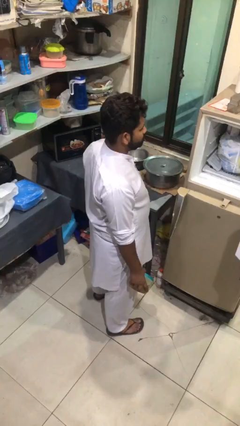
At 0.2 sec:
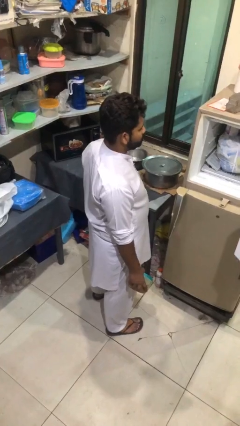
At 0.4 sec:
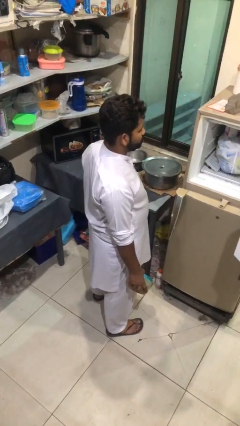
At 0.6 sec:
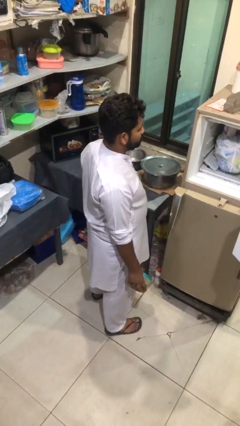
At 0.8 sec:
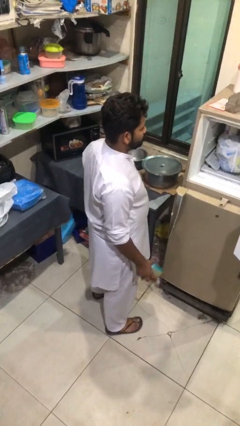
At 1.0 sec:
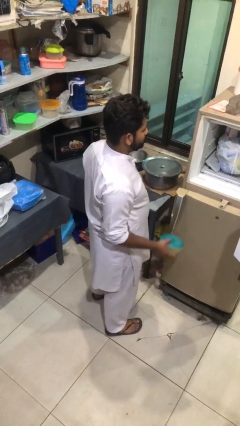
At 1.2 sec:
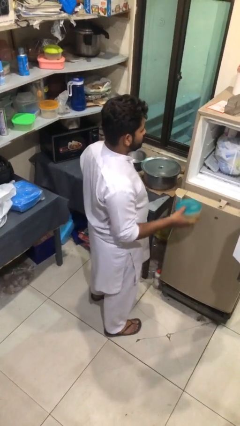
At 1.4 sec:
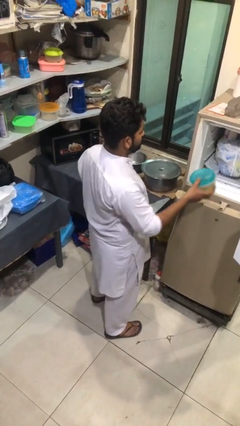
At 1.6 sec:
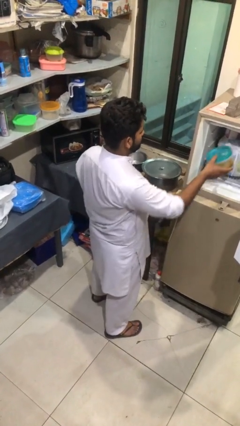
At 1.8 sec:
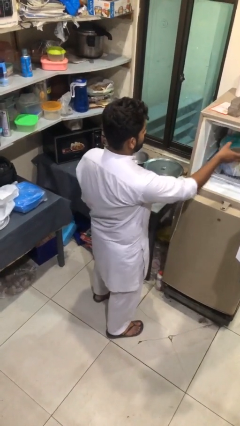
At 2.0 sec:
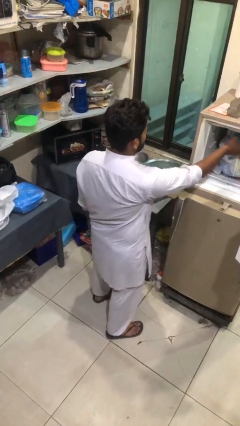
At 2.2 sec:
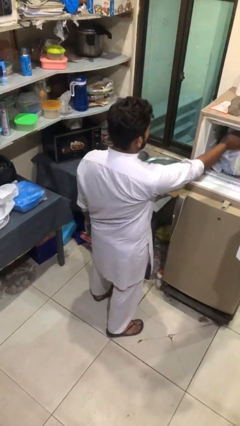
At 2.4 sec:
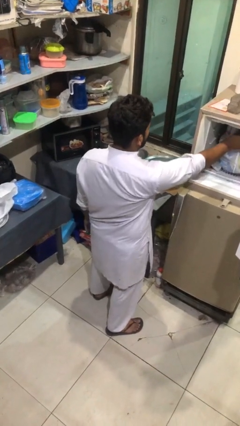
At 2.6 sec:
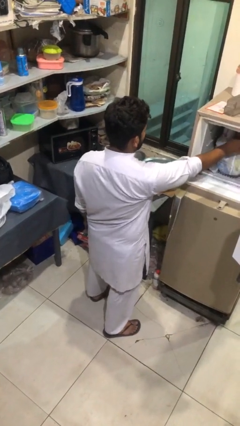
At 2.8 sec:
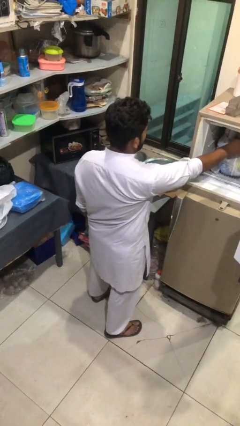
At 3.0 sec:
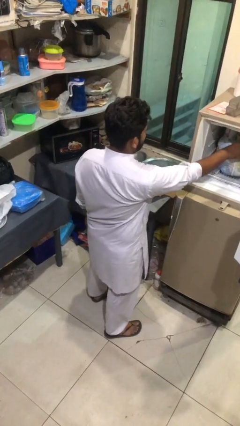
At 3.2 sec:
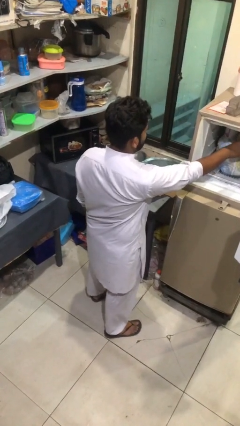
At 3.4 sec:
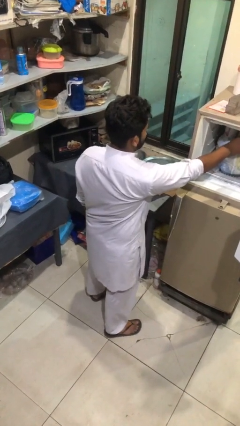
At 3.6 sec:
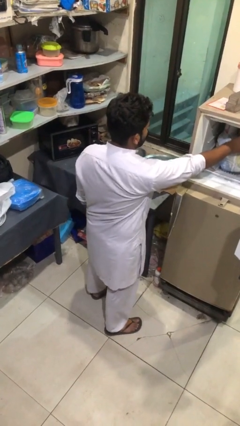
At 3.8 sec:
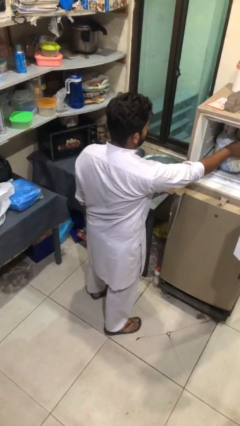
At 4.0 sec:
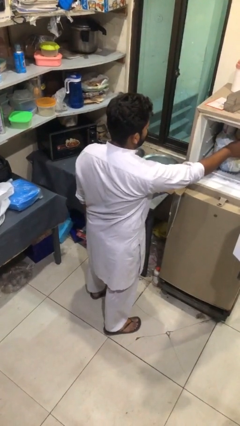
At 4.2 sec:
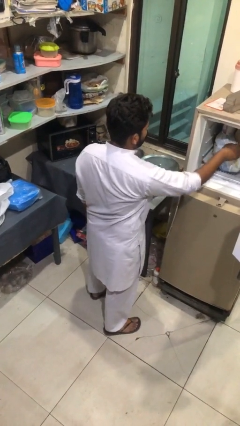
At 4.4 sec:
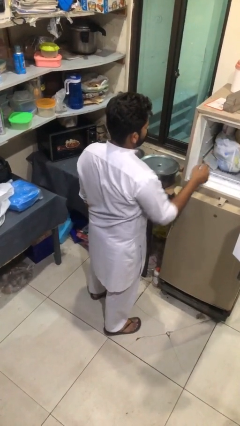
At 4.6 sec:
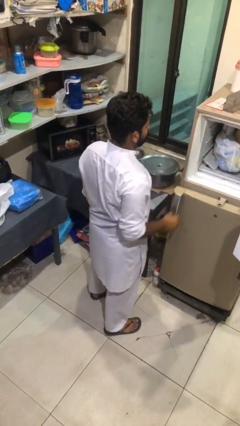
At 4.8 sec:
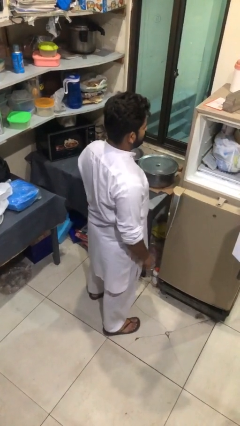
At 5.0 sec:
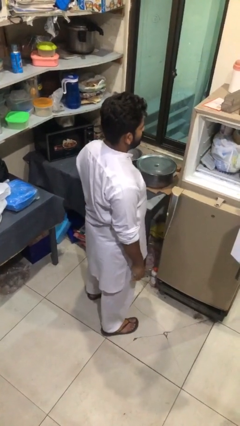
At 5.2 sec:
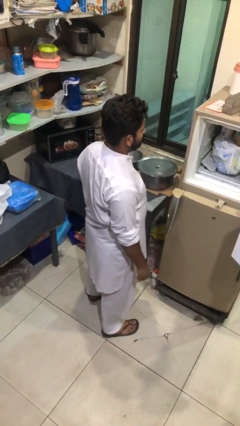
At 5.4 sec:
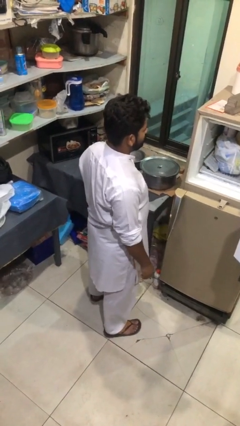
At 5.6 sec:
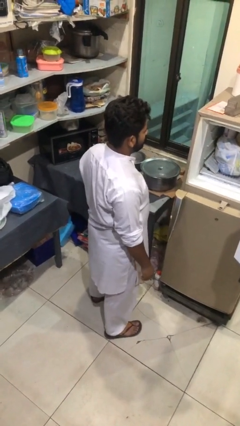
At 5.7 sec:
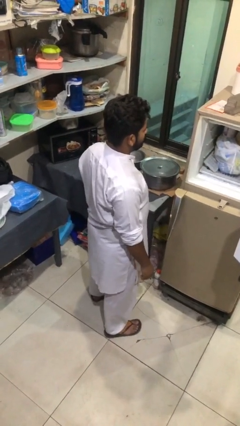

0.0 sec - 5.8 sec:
person puts object into refrigerator

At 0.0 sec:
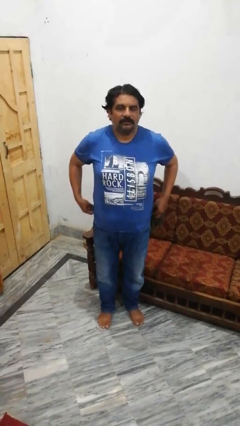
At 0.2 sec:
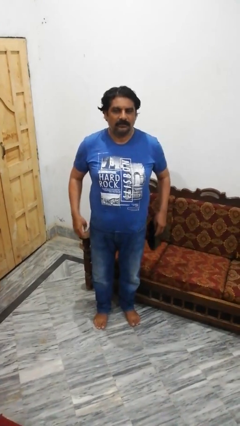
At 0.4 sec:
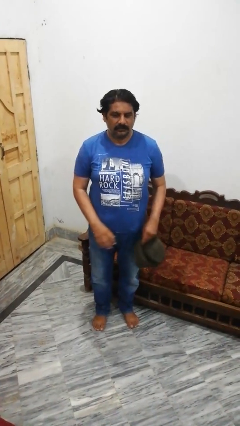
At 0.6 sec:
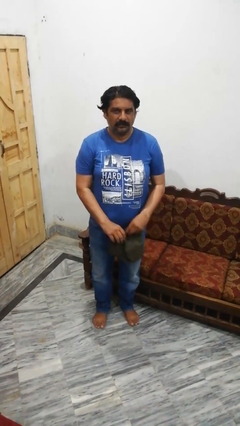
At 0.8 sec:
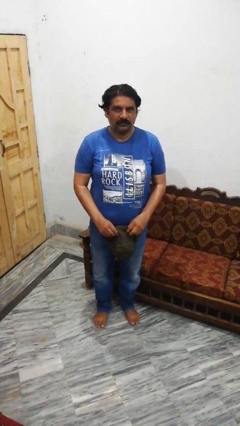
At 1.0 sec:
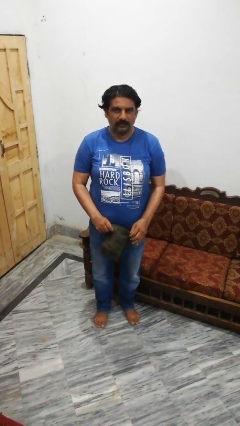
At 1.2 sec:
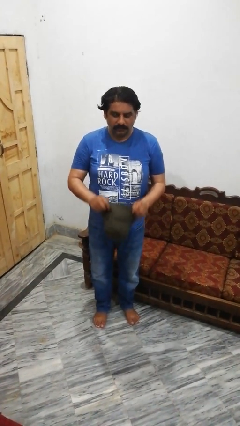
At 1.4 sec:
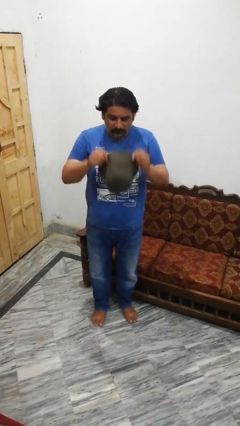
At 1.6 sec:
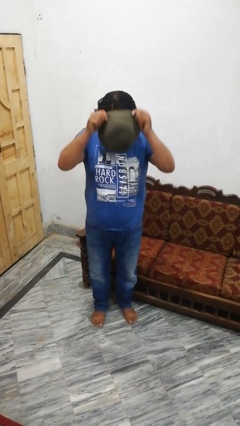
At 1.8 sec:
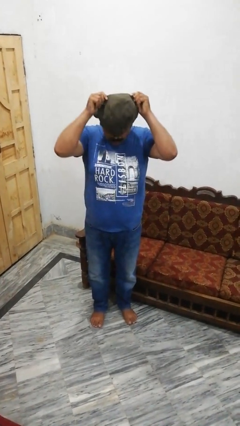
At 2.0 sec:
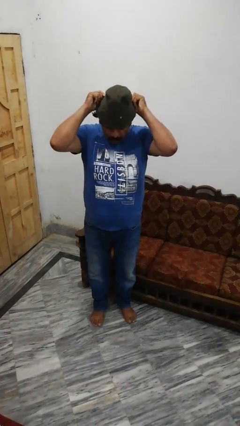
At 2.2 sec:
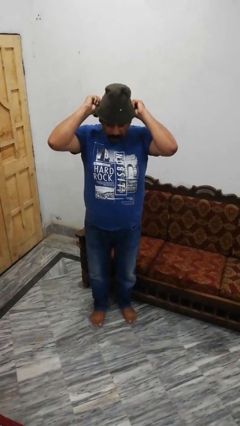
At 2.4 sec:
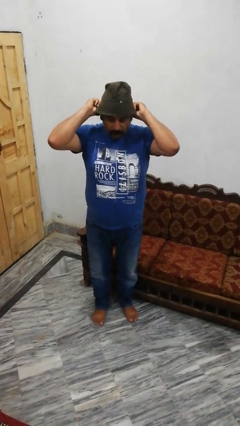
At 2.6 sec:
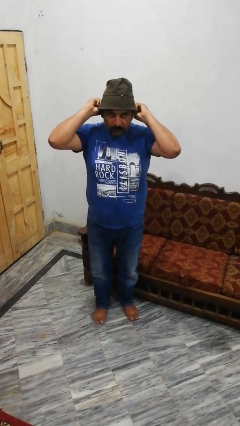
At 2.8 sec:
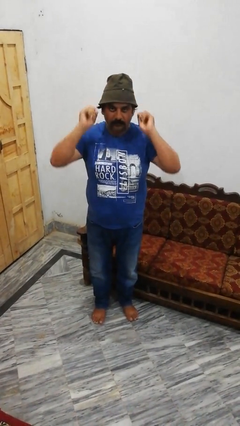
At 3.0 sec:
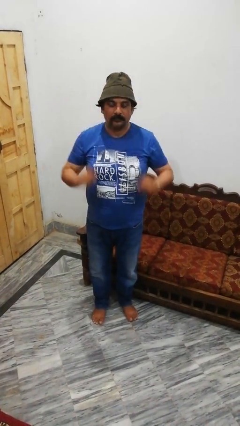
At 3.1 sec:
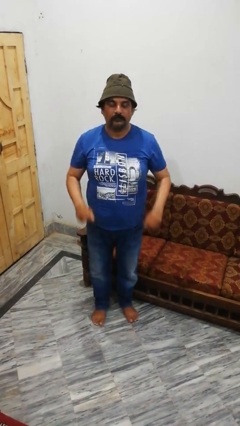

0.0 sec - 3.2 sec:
person puts on hat

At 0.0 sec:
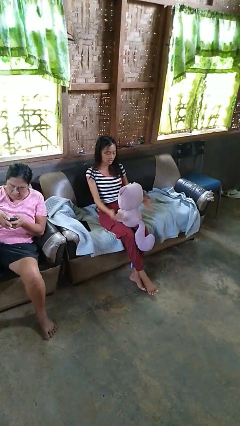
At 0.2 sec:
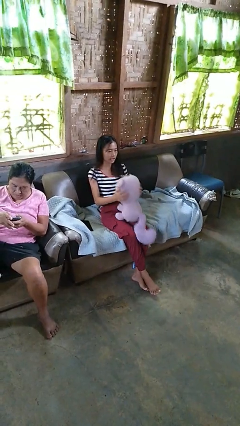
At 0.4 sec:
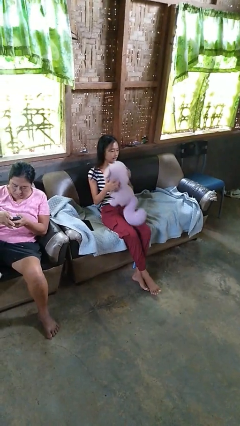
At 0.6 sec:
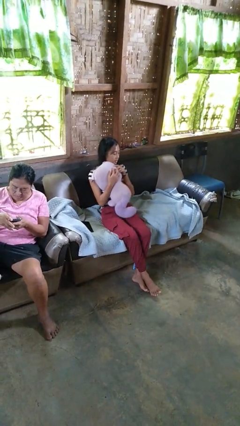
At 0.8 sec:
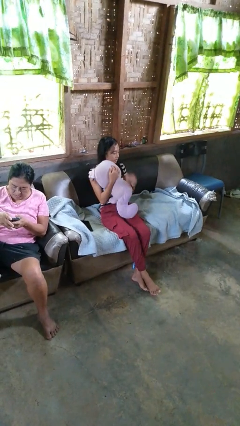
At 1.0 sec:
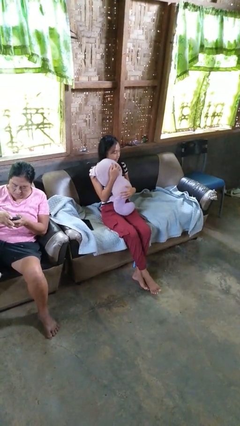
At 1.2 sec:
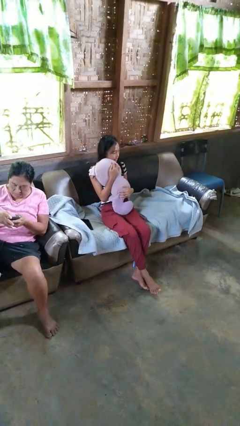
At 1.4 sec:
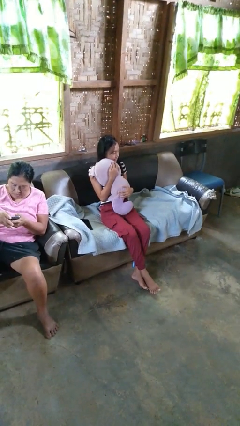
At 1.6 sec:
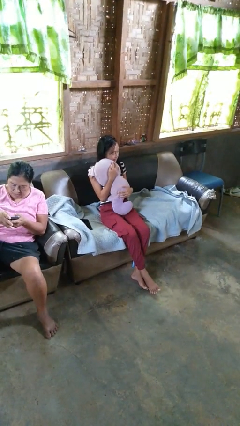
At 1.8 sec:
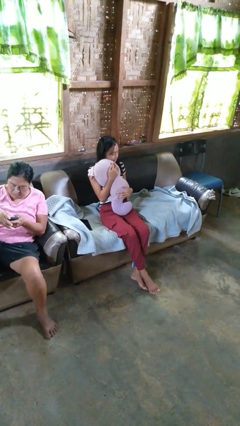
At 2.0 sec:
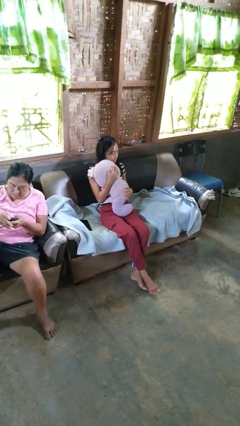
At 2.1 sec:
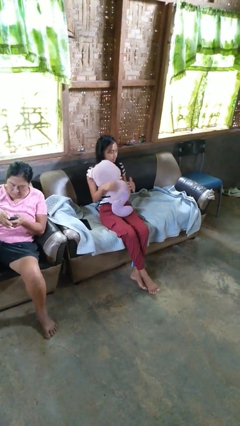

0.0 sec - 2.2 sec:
person hugs stuffed animal

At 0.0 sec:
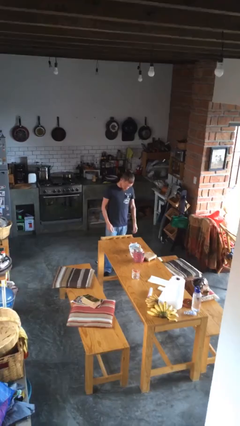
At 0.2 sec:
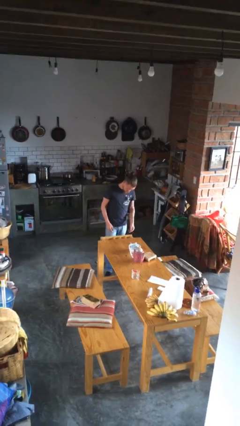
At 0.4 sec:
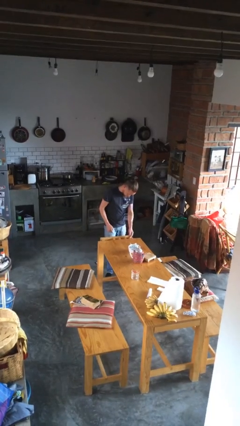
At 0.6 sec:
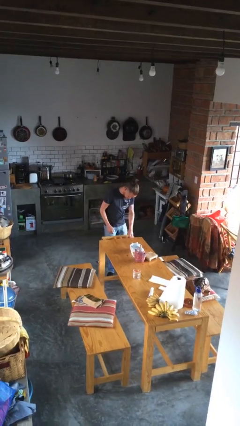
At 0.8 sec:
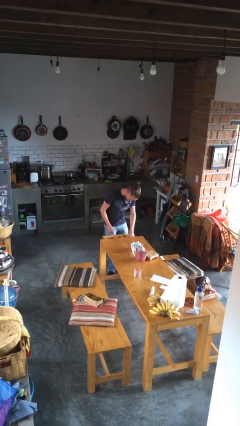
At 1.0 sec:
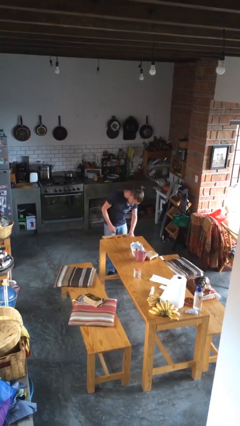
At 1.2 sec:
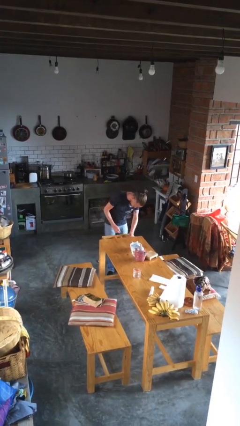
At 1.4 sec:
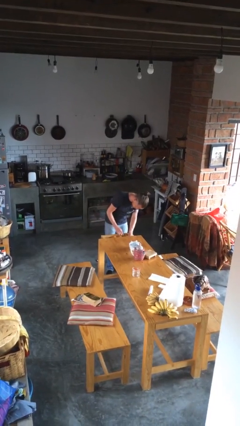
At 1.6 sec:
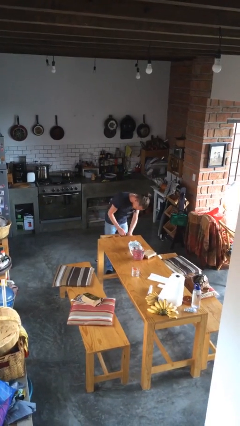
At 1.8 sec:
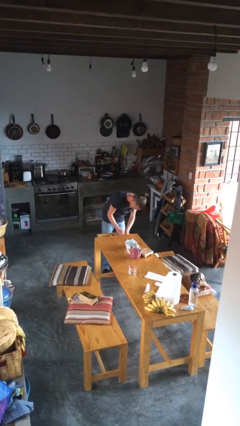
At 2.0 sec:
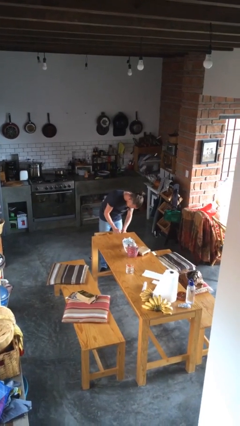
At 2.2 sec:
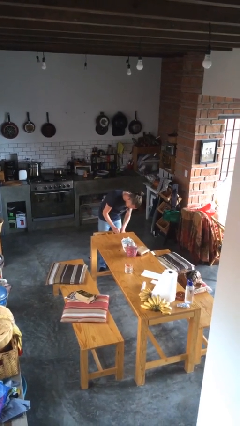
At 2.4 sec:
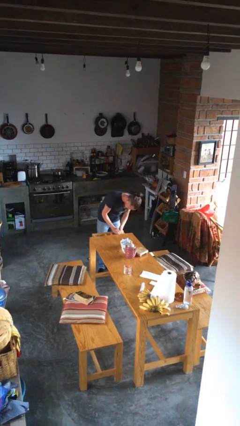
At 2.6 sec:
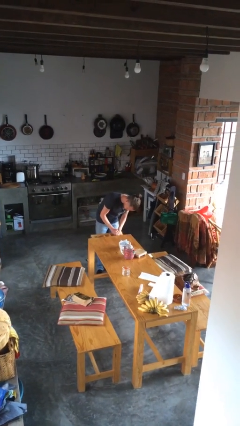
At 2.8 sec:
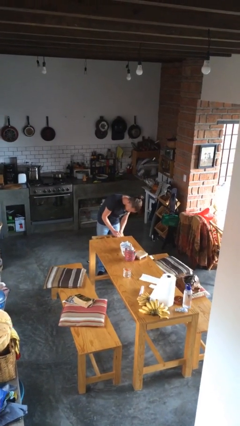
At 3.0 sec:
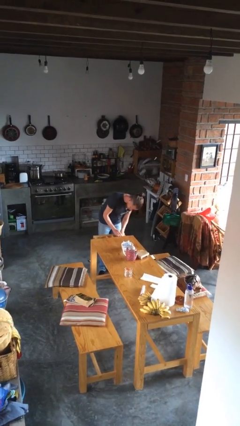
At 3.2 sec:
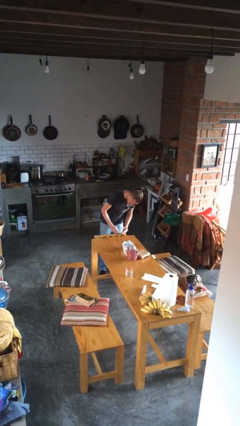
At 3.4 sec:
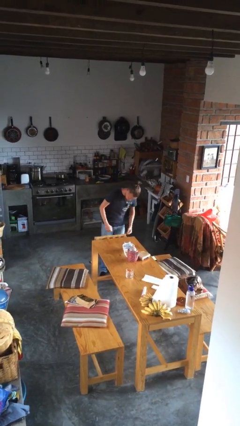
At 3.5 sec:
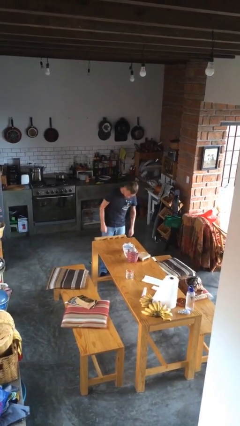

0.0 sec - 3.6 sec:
person searches in cabinet

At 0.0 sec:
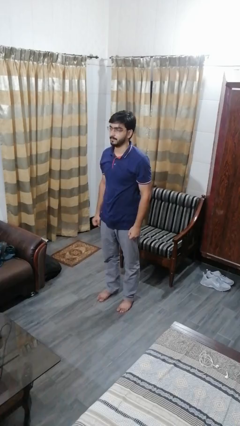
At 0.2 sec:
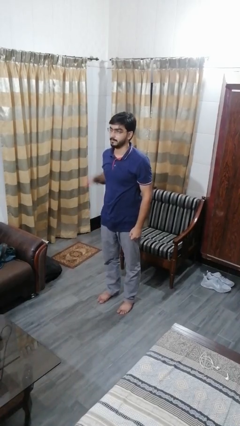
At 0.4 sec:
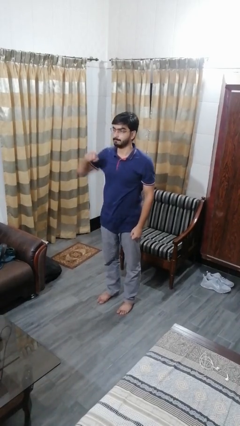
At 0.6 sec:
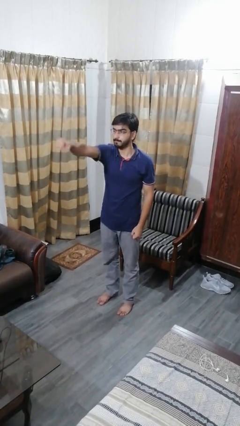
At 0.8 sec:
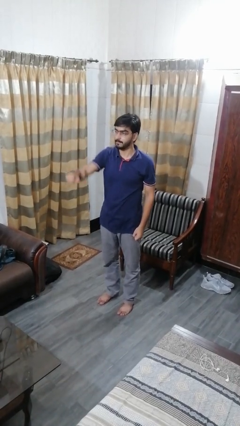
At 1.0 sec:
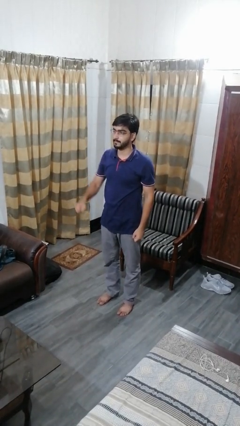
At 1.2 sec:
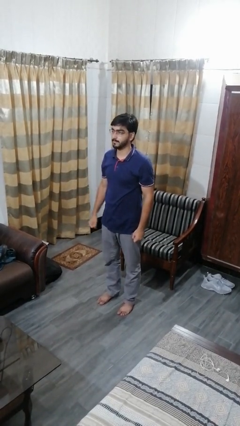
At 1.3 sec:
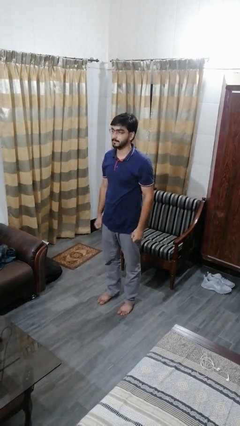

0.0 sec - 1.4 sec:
person punches

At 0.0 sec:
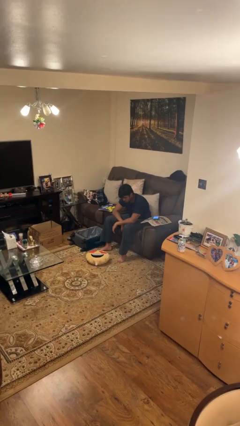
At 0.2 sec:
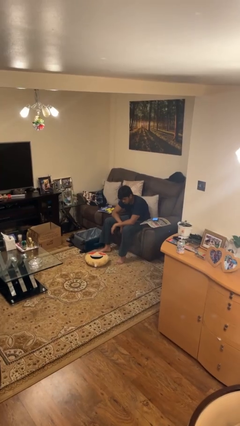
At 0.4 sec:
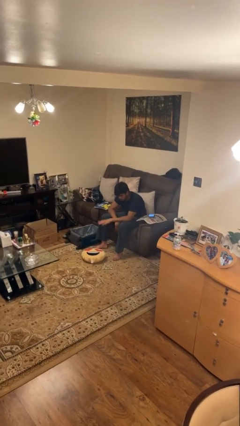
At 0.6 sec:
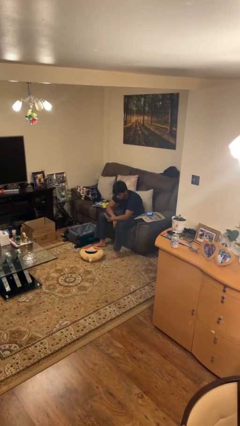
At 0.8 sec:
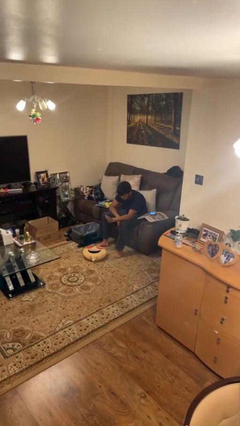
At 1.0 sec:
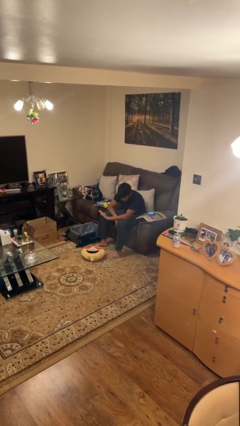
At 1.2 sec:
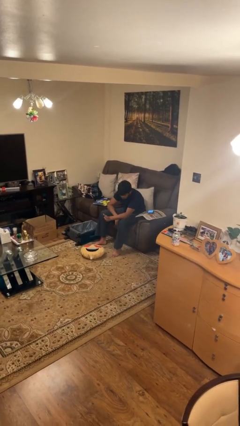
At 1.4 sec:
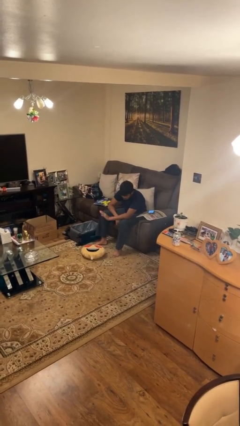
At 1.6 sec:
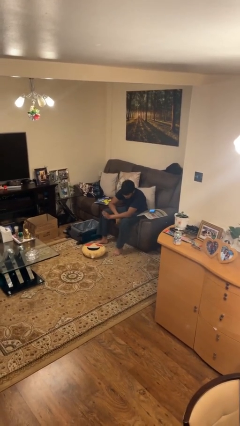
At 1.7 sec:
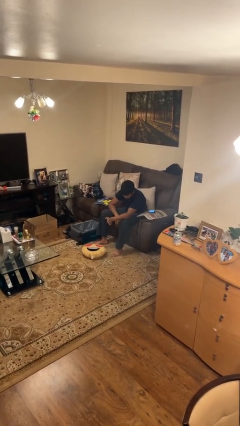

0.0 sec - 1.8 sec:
person waves hand over object
